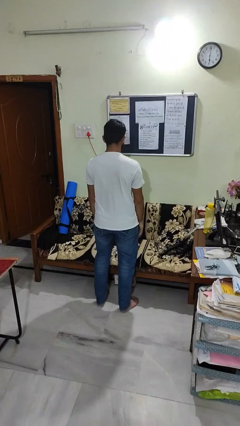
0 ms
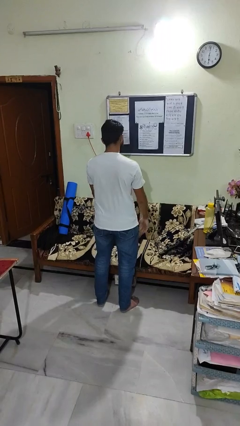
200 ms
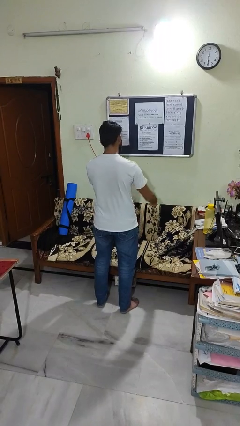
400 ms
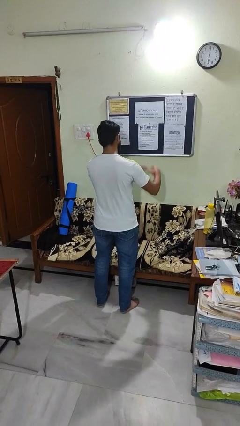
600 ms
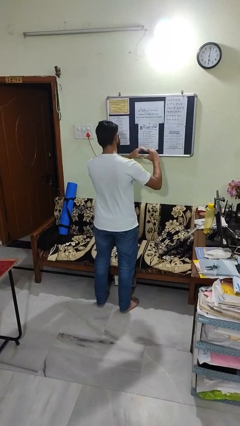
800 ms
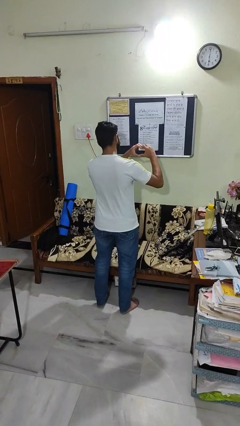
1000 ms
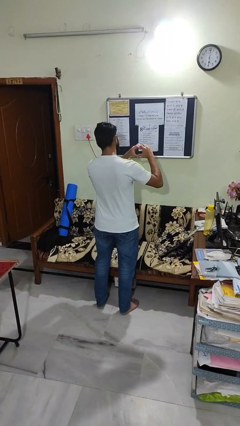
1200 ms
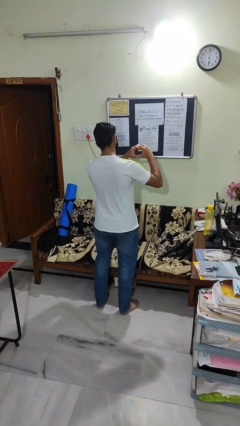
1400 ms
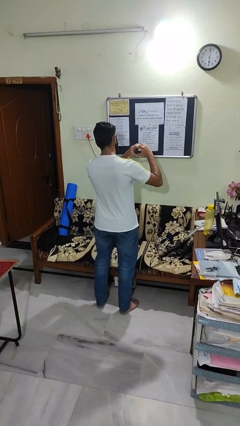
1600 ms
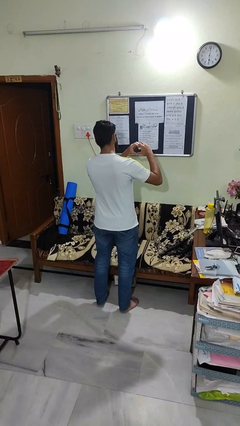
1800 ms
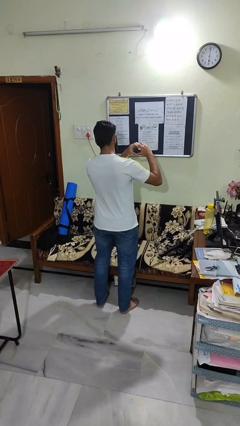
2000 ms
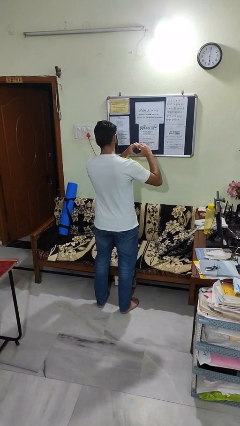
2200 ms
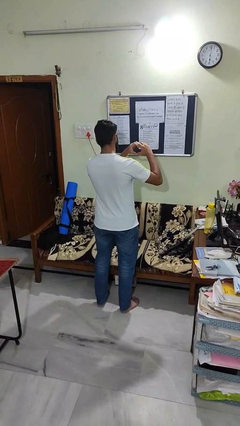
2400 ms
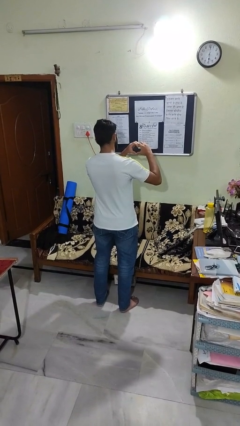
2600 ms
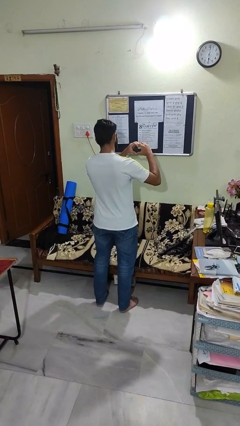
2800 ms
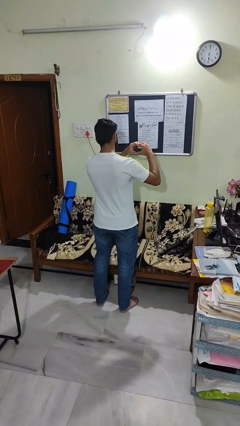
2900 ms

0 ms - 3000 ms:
person gestures heart

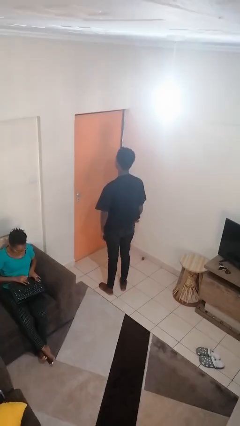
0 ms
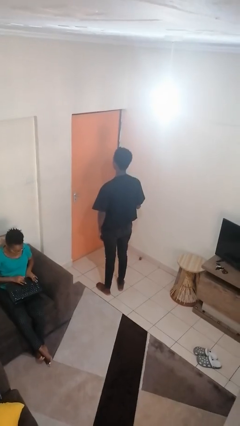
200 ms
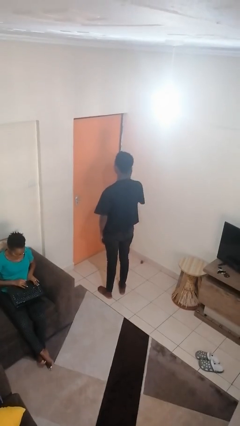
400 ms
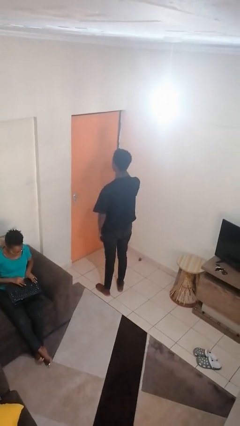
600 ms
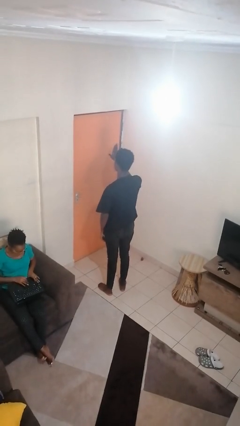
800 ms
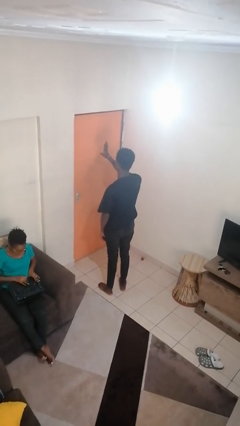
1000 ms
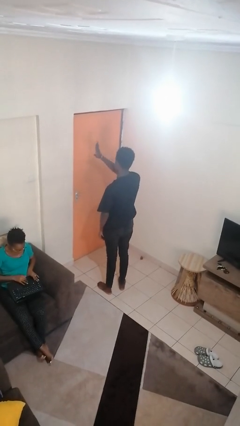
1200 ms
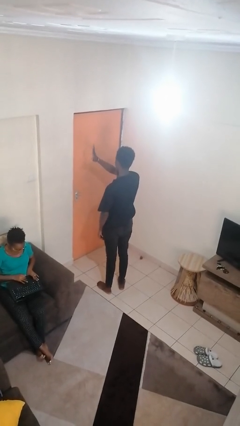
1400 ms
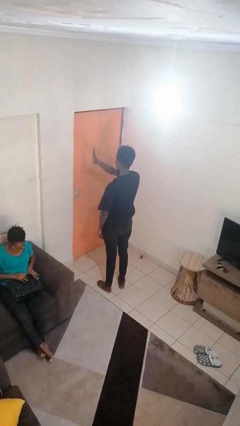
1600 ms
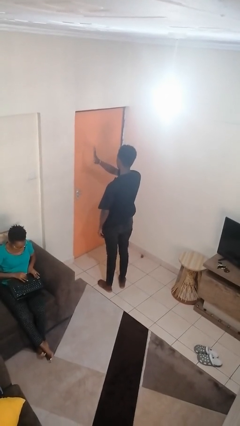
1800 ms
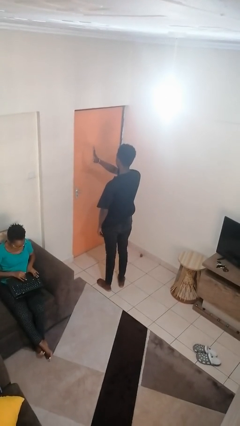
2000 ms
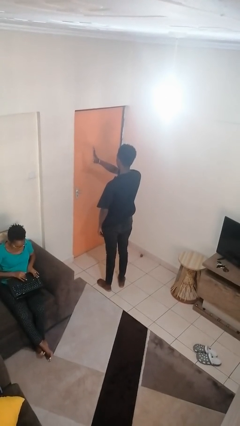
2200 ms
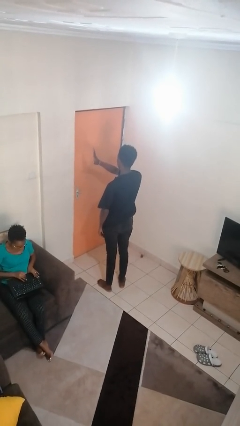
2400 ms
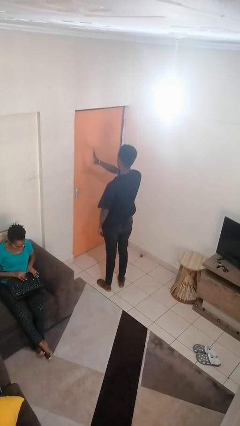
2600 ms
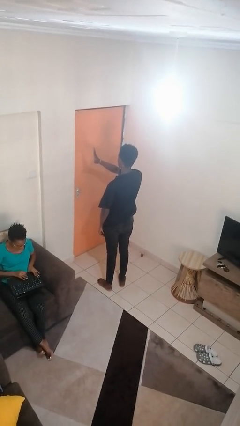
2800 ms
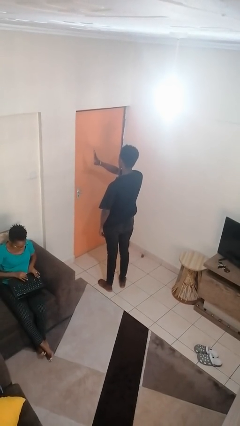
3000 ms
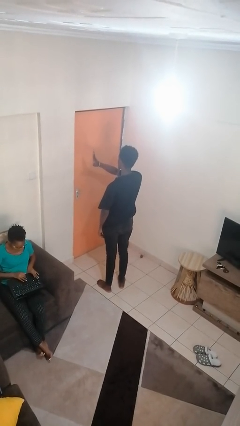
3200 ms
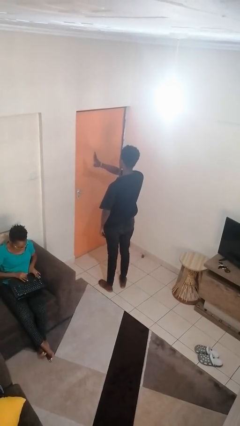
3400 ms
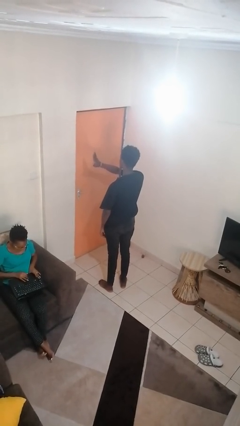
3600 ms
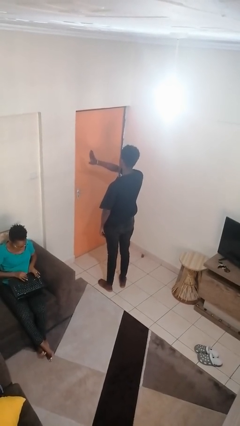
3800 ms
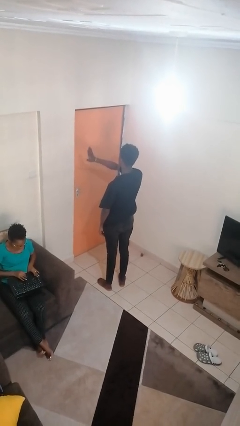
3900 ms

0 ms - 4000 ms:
person gestures swipe left

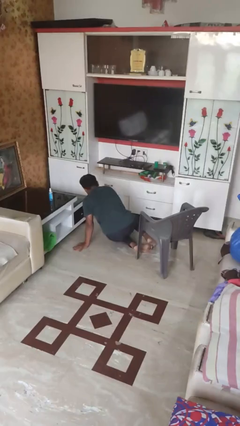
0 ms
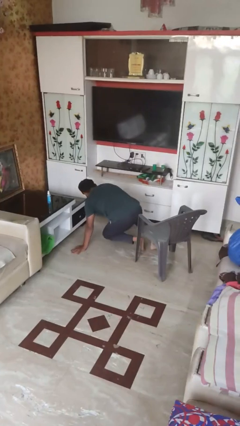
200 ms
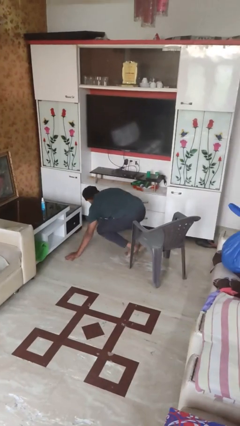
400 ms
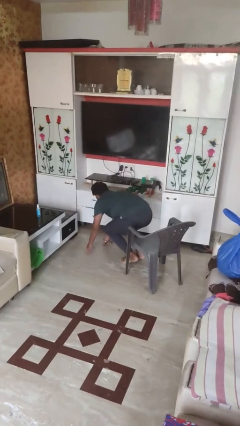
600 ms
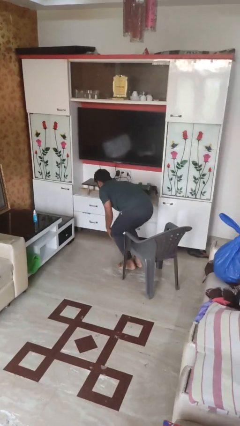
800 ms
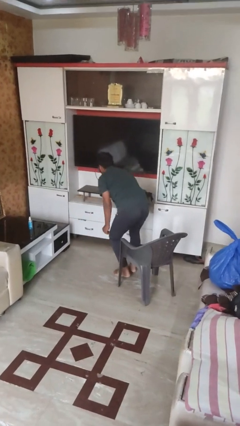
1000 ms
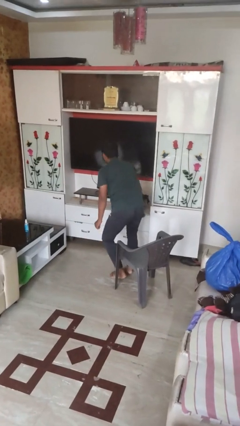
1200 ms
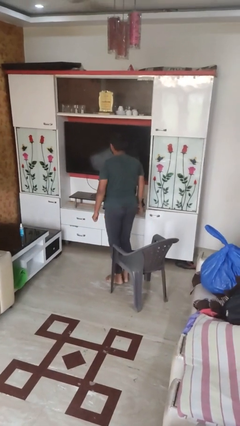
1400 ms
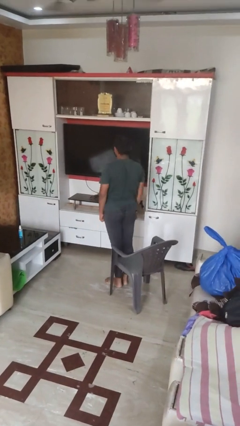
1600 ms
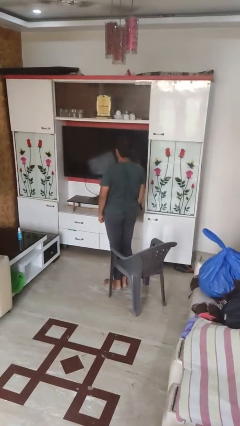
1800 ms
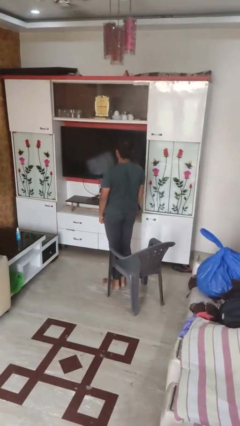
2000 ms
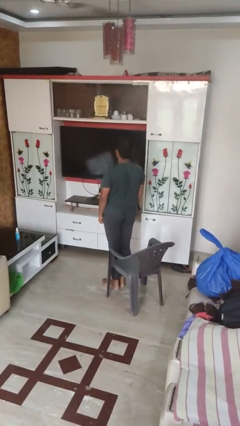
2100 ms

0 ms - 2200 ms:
person stands up from floor

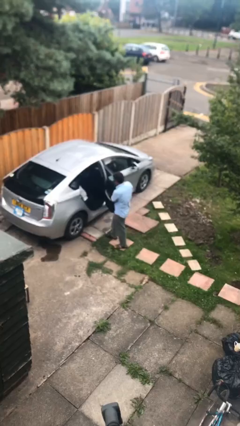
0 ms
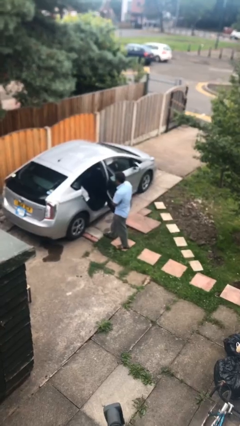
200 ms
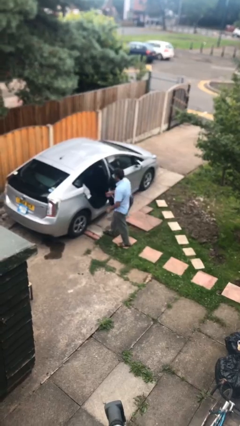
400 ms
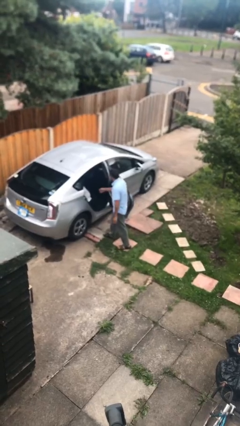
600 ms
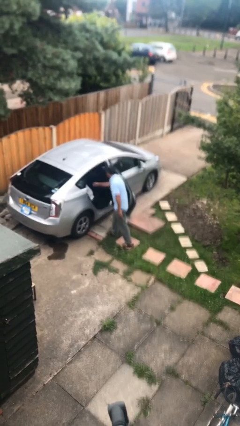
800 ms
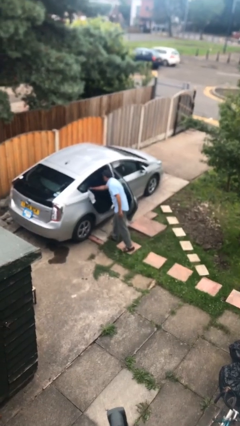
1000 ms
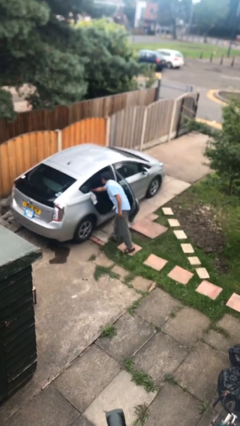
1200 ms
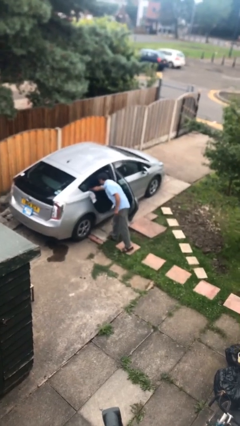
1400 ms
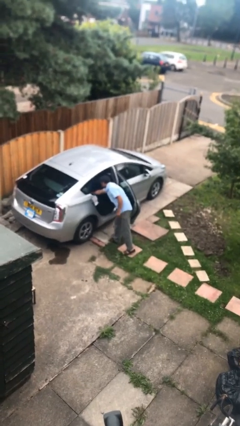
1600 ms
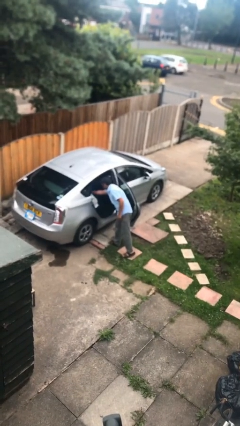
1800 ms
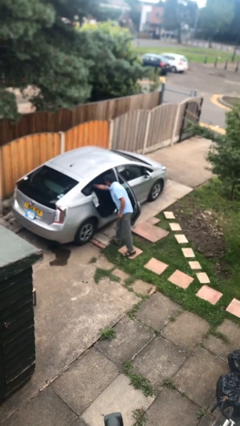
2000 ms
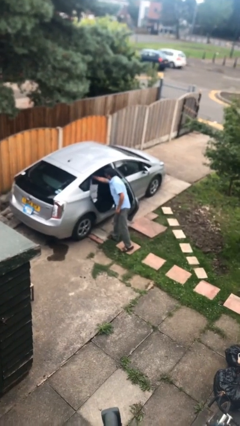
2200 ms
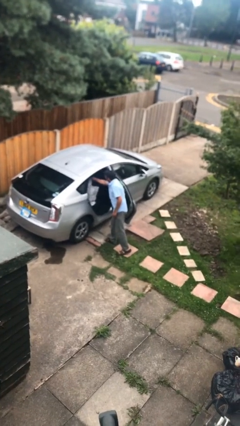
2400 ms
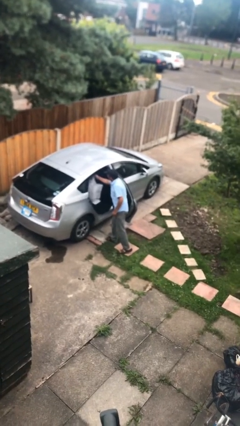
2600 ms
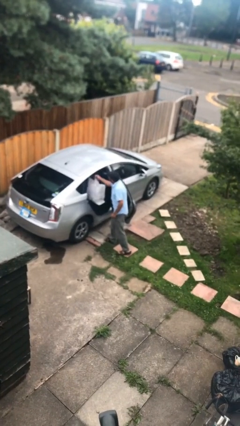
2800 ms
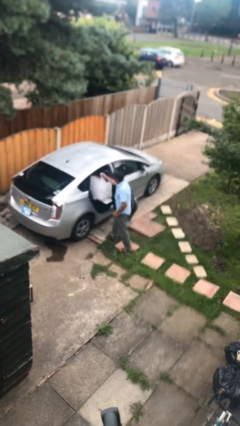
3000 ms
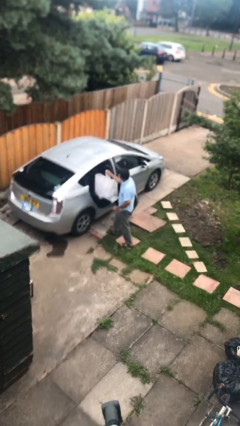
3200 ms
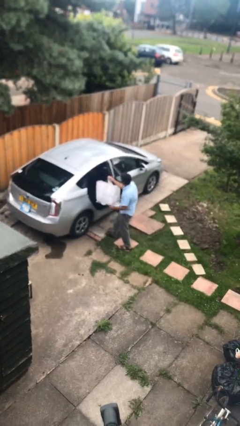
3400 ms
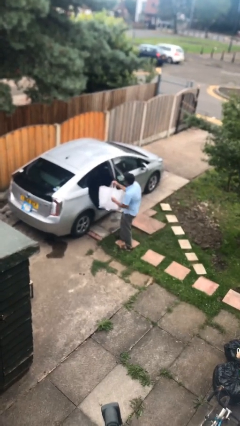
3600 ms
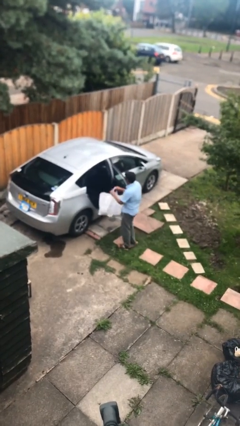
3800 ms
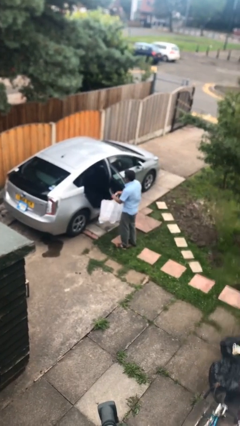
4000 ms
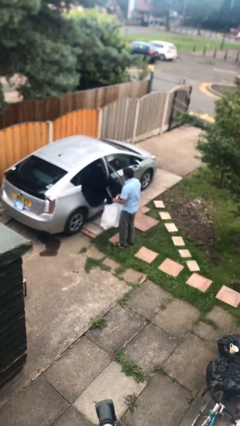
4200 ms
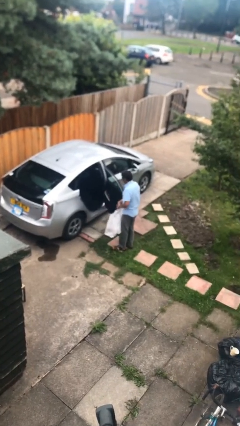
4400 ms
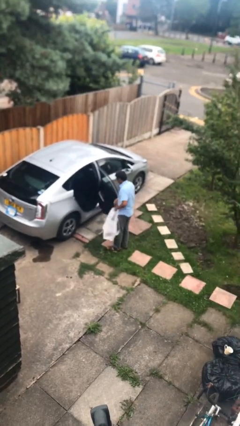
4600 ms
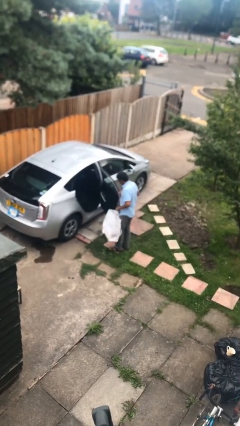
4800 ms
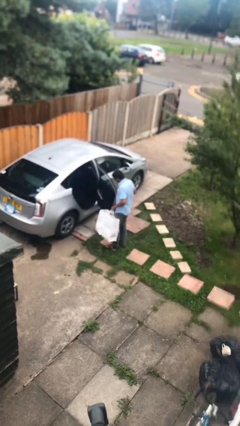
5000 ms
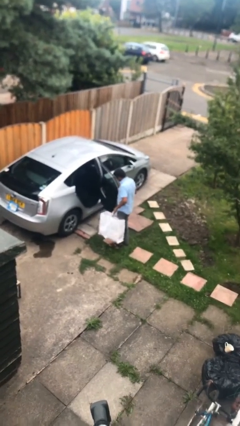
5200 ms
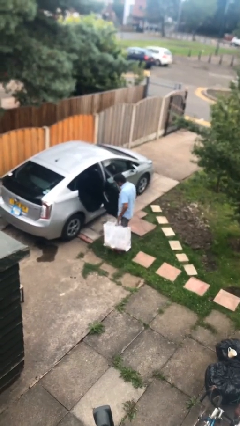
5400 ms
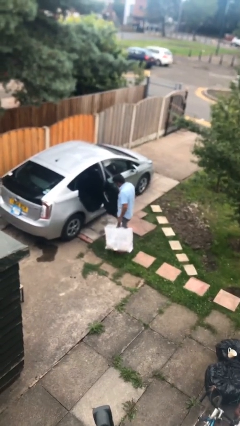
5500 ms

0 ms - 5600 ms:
person unloads car

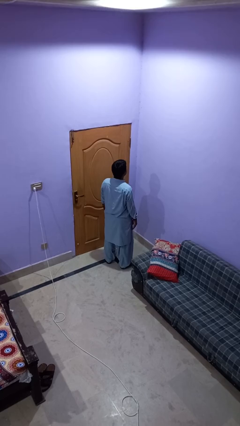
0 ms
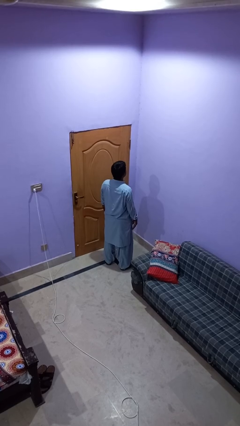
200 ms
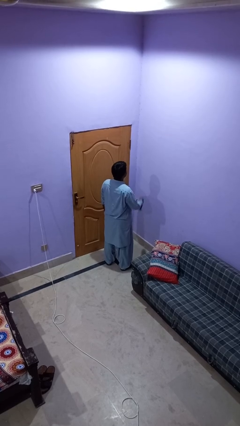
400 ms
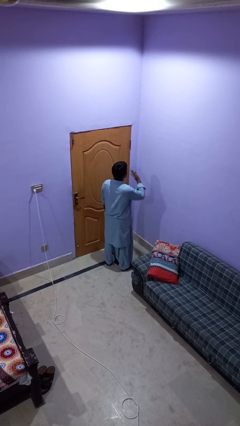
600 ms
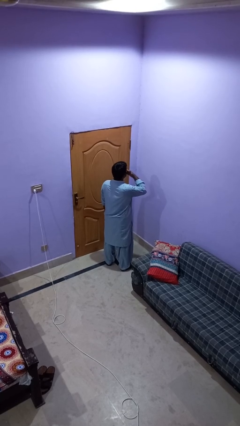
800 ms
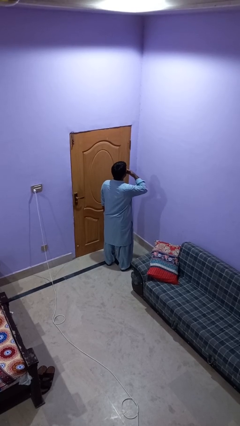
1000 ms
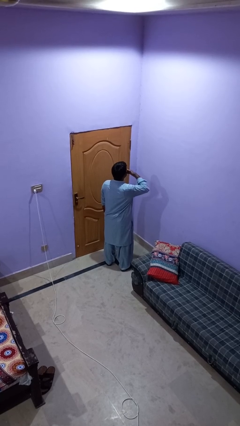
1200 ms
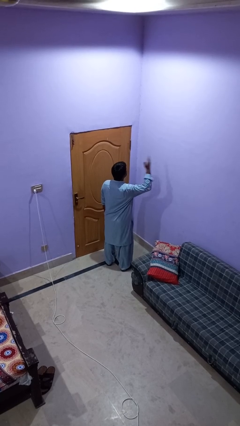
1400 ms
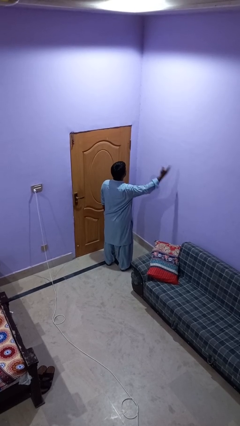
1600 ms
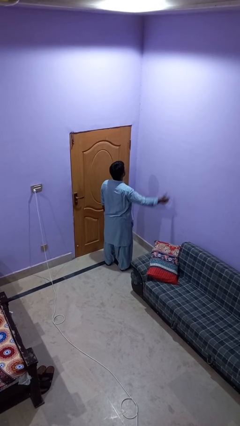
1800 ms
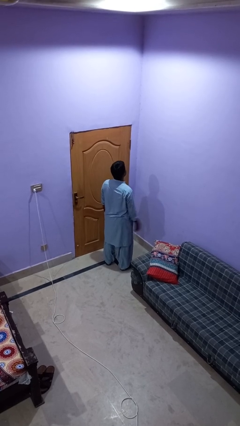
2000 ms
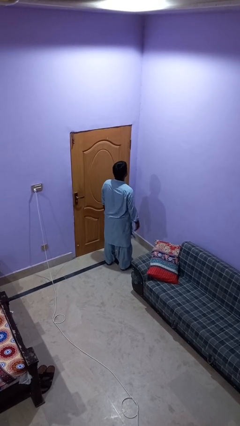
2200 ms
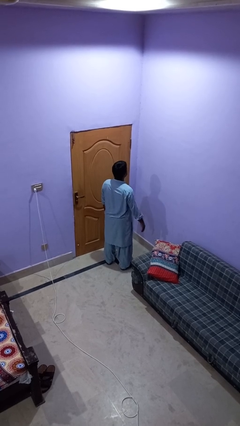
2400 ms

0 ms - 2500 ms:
person gestures blow kiss
